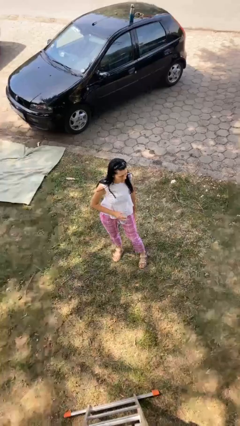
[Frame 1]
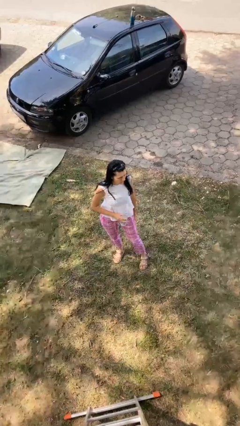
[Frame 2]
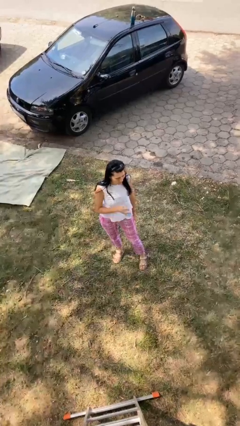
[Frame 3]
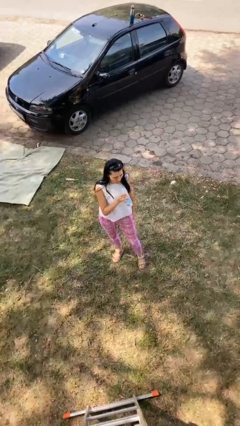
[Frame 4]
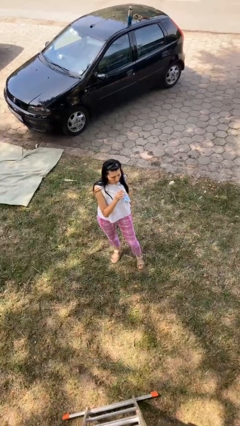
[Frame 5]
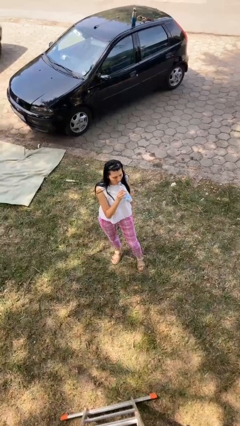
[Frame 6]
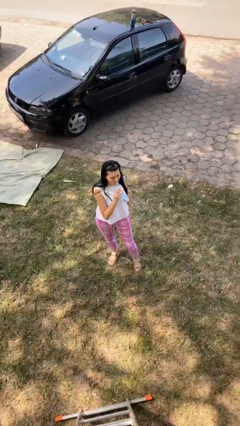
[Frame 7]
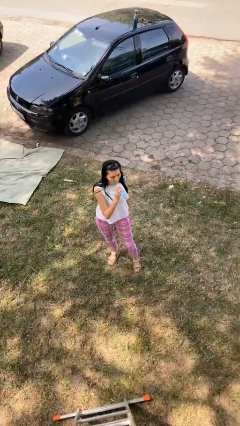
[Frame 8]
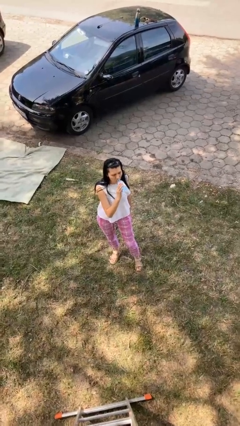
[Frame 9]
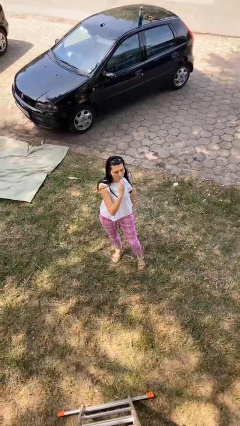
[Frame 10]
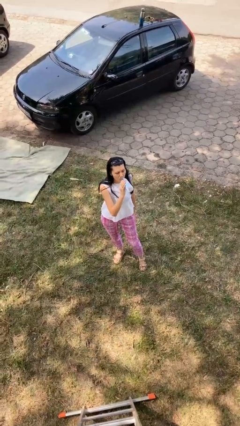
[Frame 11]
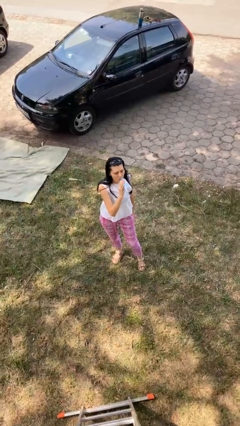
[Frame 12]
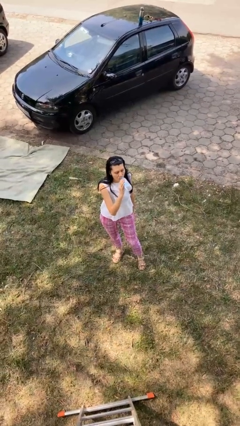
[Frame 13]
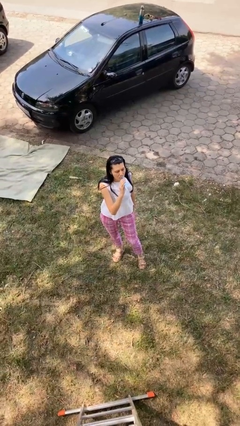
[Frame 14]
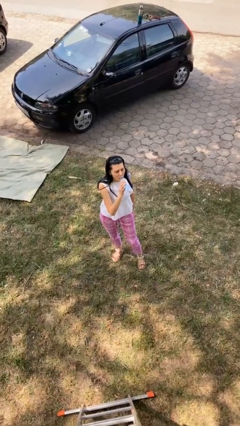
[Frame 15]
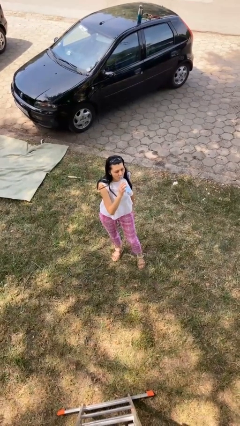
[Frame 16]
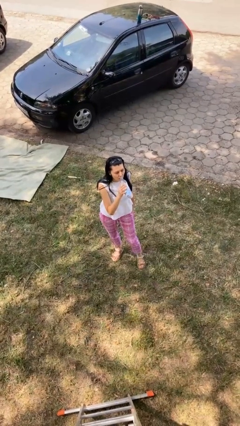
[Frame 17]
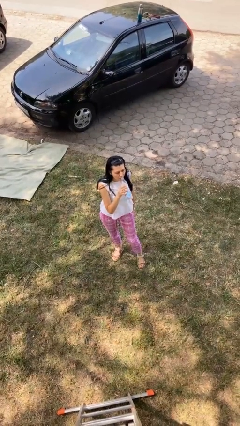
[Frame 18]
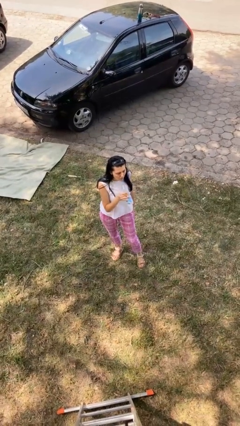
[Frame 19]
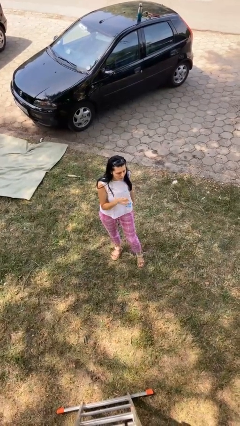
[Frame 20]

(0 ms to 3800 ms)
person drinks from bottle

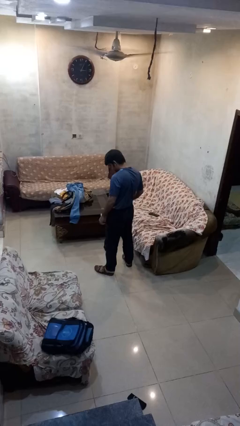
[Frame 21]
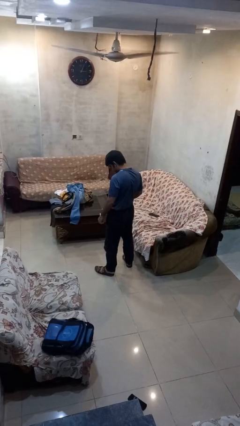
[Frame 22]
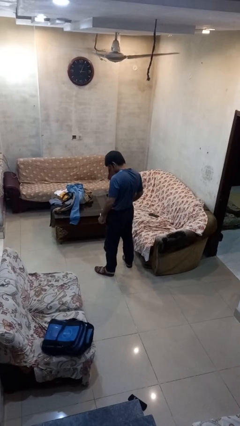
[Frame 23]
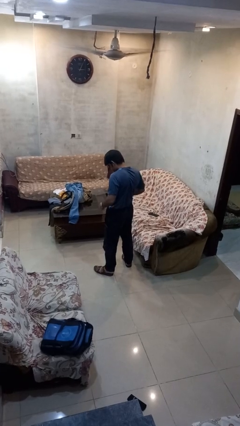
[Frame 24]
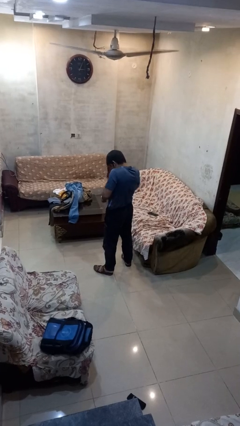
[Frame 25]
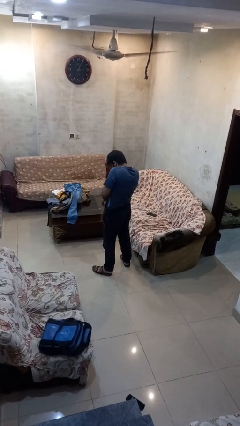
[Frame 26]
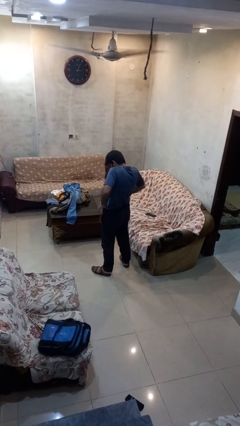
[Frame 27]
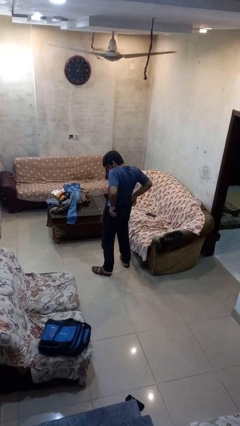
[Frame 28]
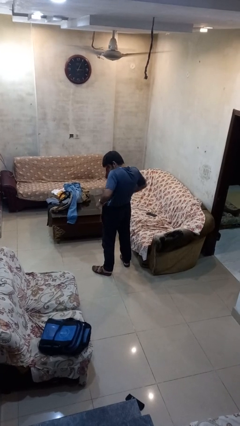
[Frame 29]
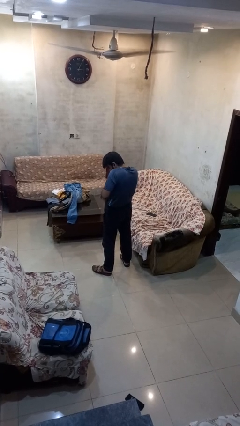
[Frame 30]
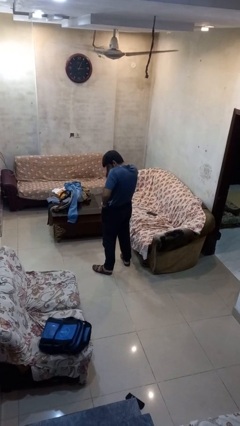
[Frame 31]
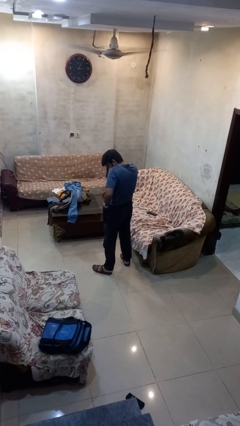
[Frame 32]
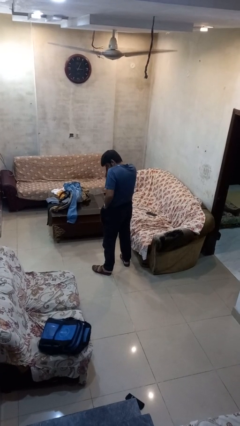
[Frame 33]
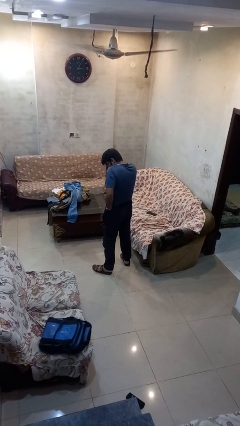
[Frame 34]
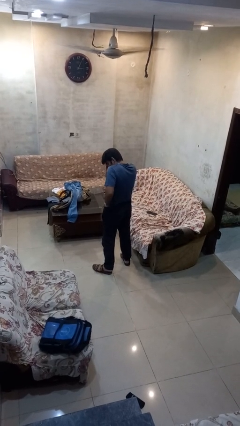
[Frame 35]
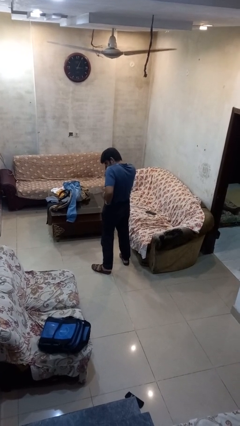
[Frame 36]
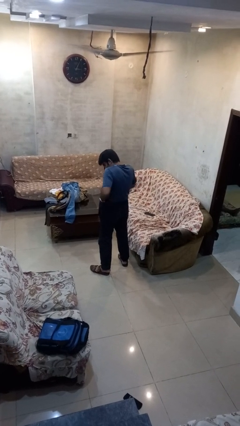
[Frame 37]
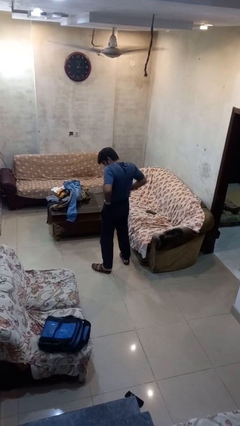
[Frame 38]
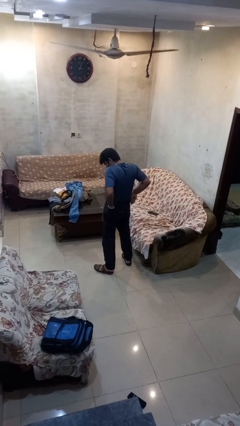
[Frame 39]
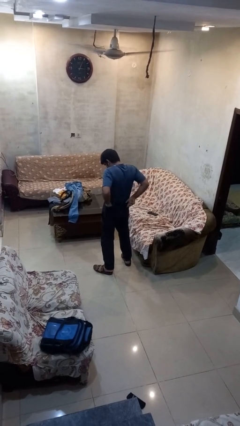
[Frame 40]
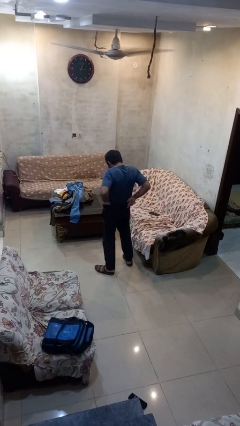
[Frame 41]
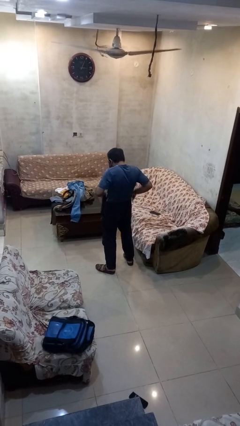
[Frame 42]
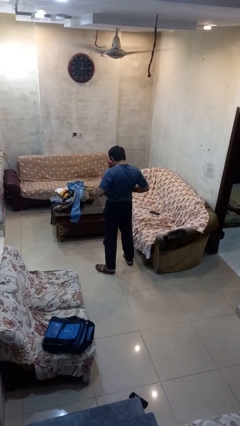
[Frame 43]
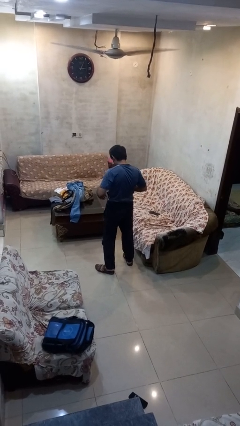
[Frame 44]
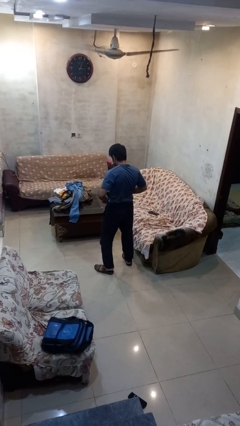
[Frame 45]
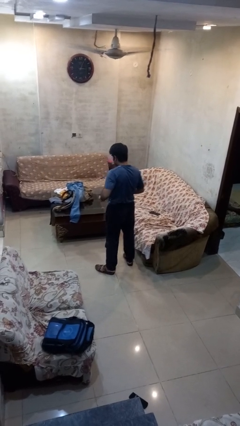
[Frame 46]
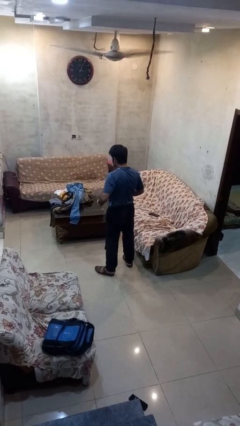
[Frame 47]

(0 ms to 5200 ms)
person hikes up pants

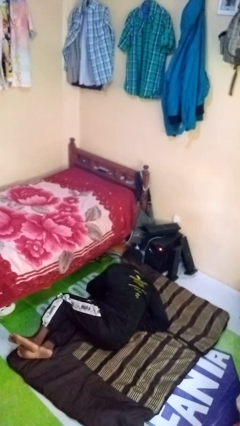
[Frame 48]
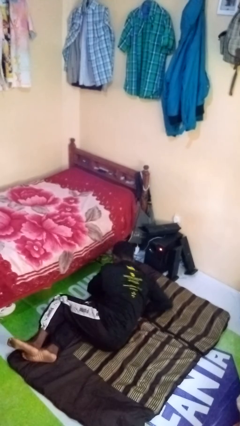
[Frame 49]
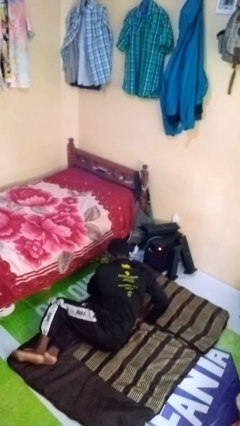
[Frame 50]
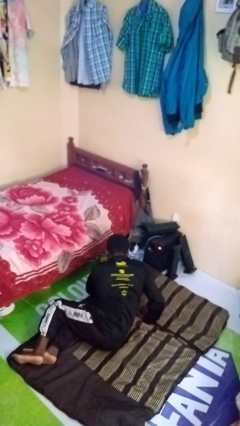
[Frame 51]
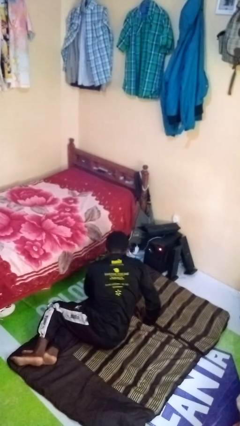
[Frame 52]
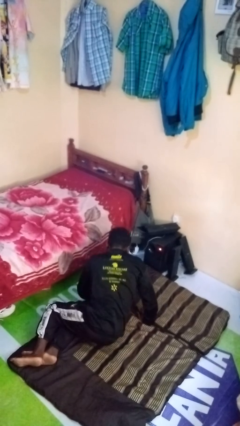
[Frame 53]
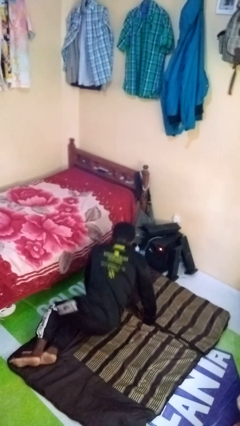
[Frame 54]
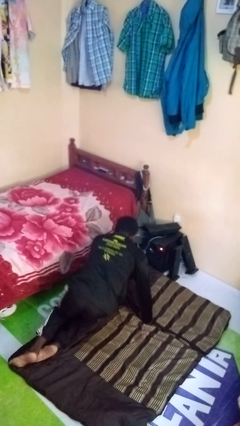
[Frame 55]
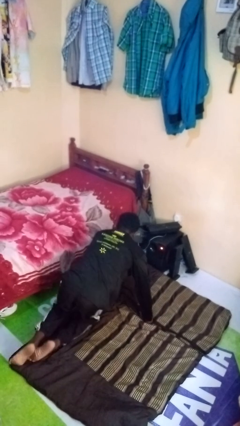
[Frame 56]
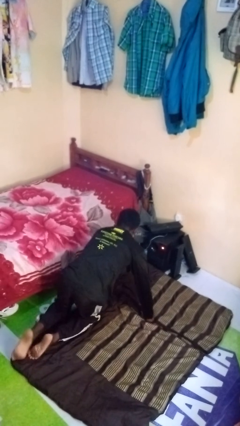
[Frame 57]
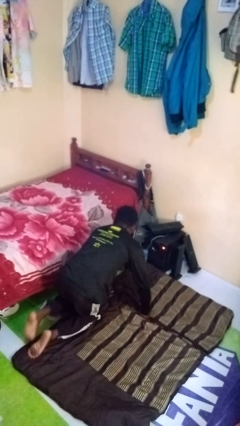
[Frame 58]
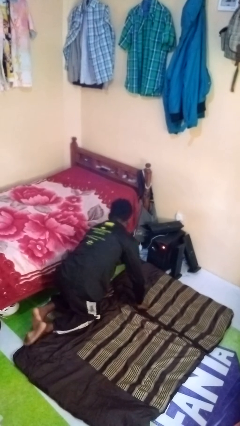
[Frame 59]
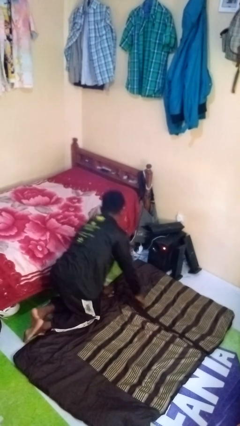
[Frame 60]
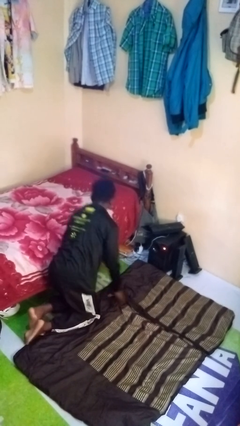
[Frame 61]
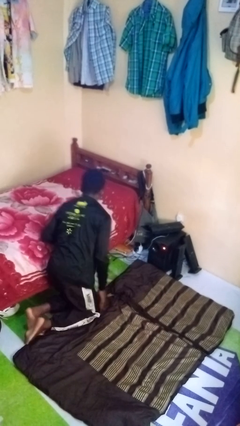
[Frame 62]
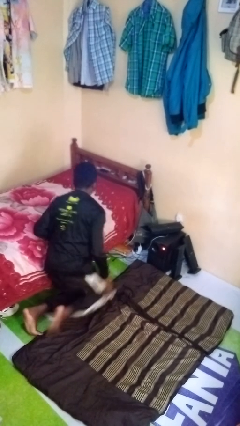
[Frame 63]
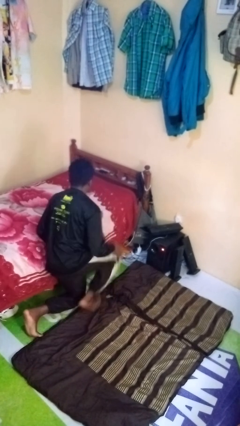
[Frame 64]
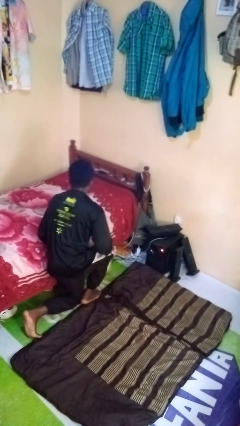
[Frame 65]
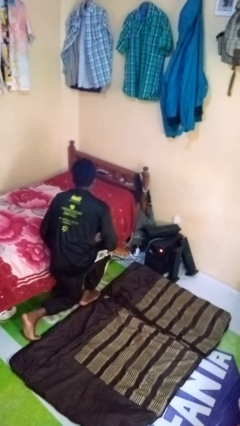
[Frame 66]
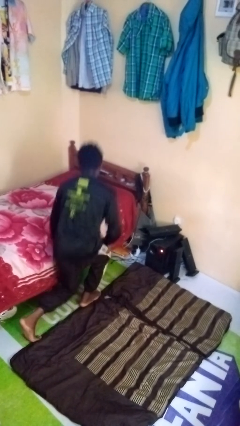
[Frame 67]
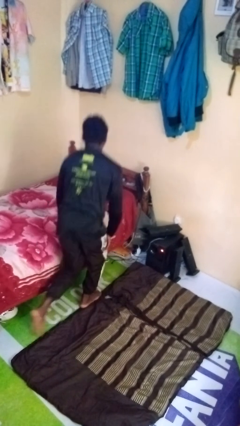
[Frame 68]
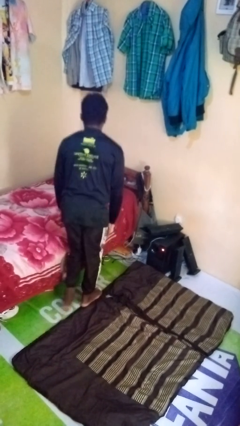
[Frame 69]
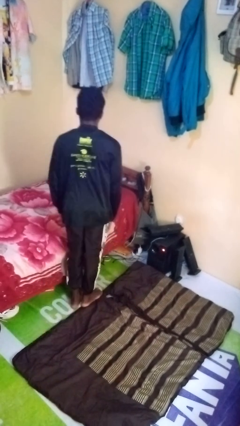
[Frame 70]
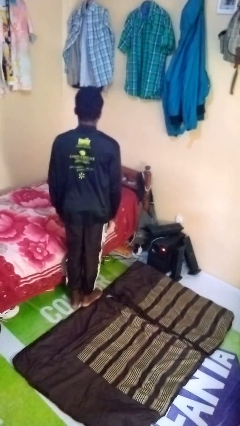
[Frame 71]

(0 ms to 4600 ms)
person stands up from floor

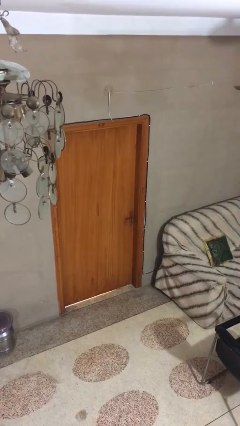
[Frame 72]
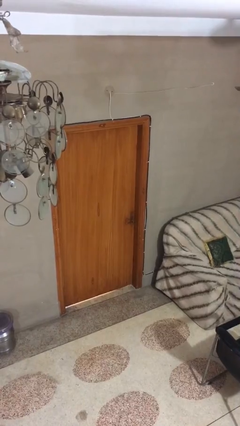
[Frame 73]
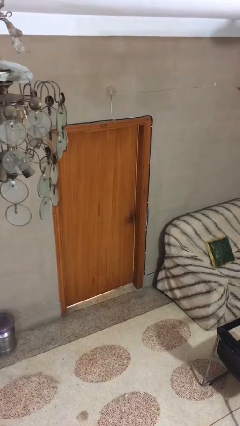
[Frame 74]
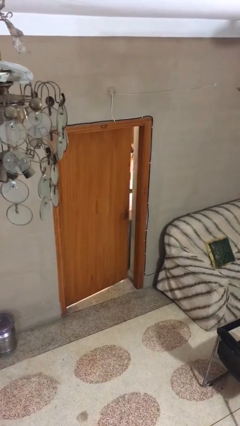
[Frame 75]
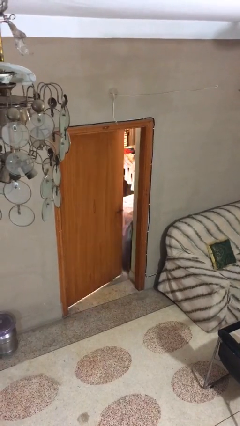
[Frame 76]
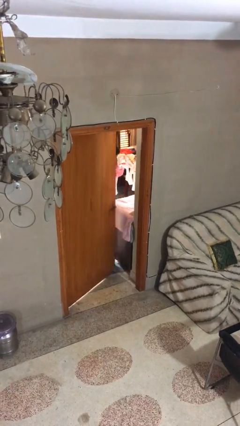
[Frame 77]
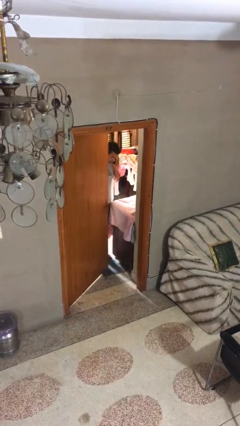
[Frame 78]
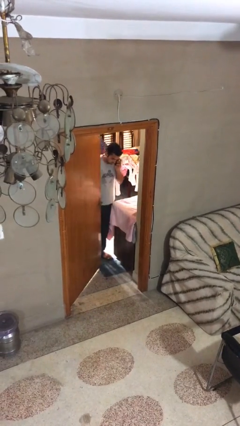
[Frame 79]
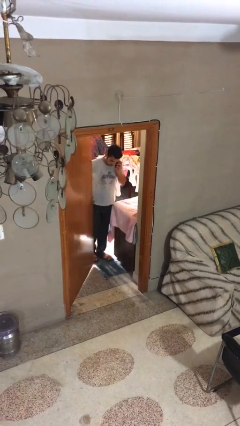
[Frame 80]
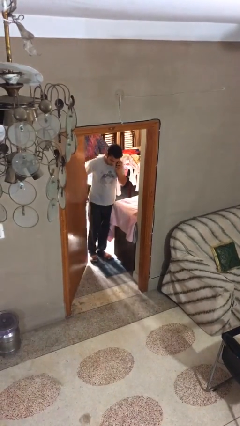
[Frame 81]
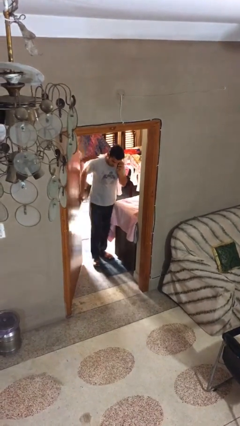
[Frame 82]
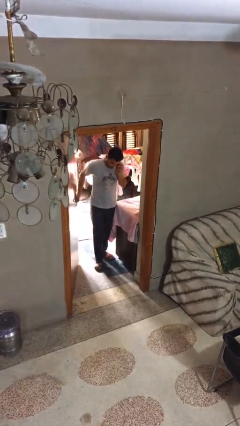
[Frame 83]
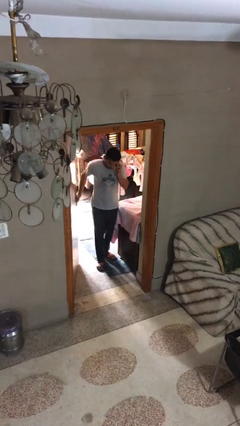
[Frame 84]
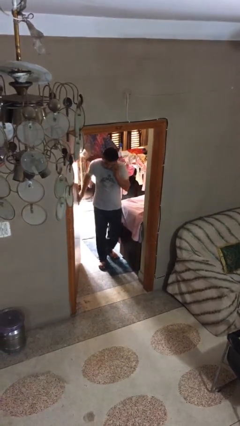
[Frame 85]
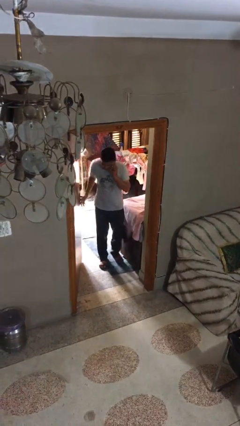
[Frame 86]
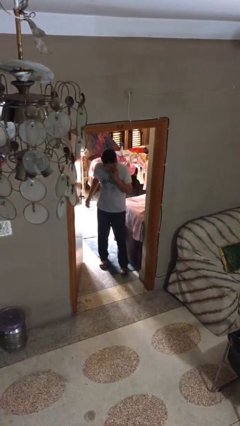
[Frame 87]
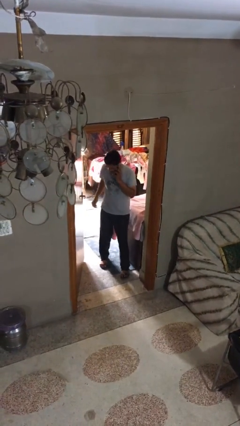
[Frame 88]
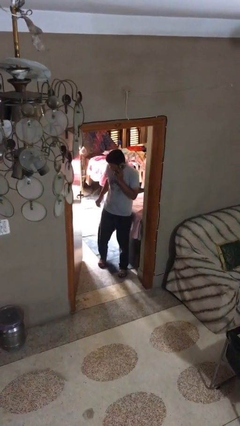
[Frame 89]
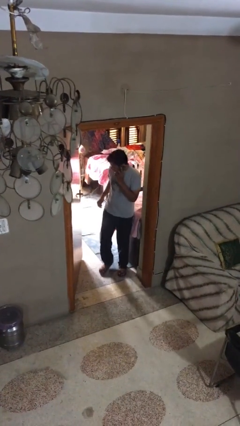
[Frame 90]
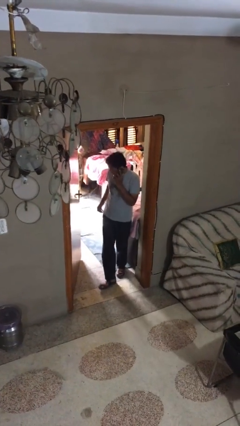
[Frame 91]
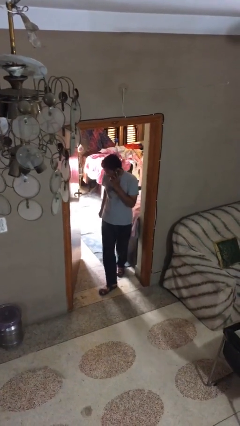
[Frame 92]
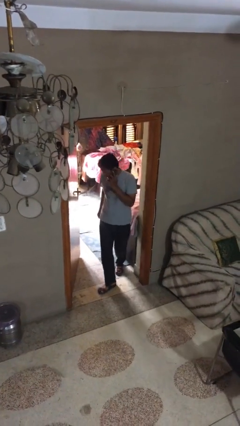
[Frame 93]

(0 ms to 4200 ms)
person opens facility door
